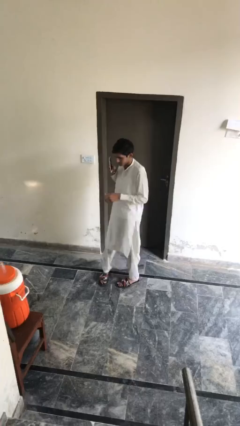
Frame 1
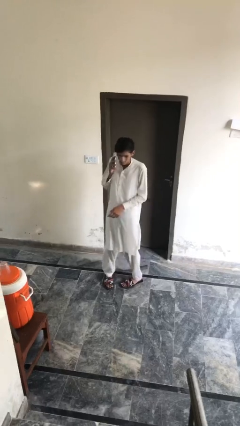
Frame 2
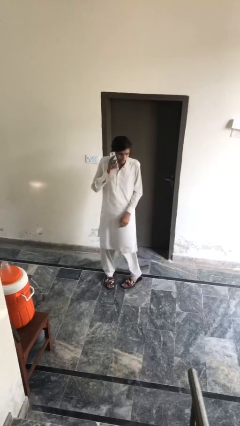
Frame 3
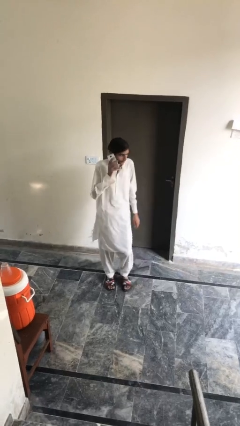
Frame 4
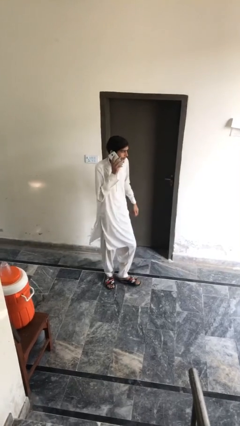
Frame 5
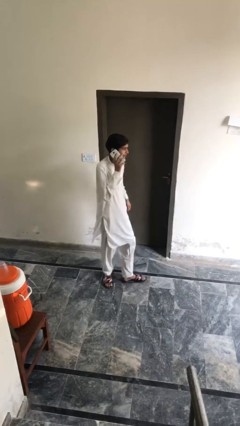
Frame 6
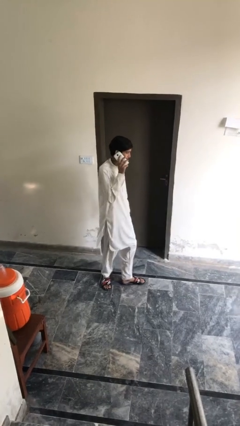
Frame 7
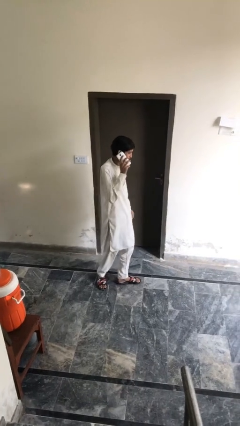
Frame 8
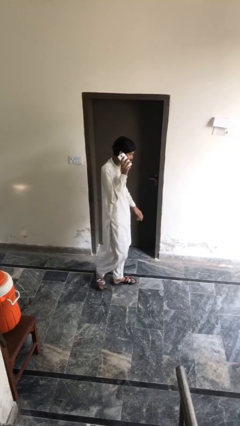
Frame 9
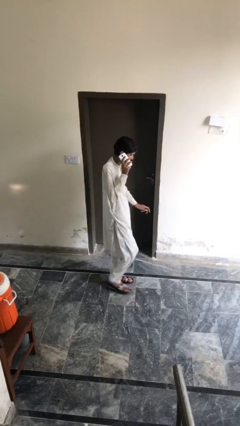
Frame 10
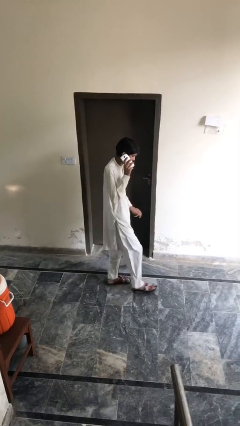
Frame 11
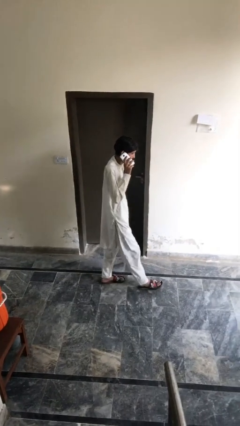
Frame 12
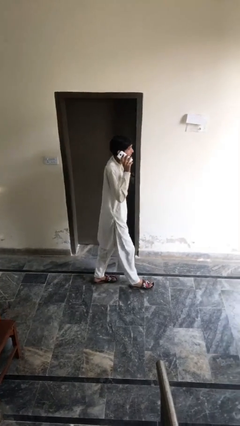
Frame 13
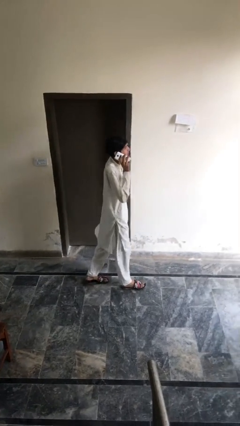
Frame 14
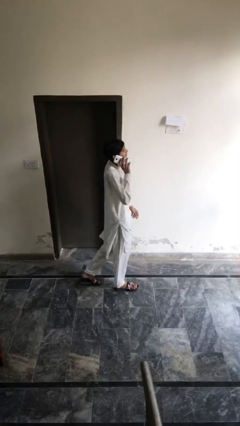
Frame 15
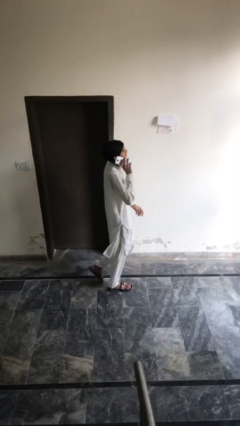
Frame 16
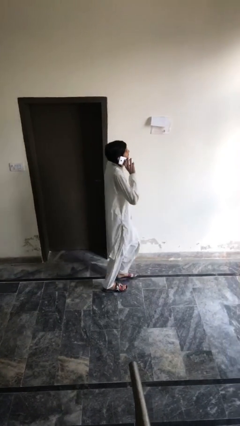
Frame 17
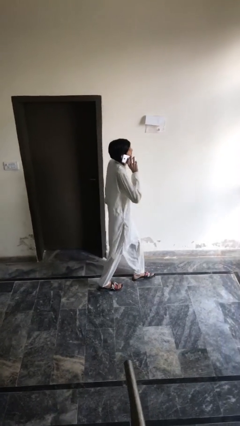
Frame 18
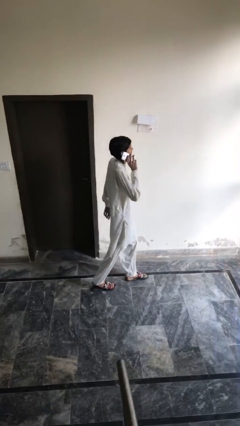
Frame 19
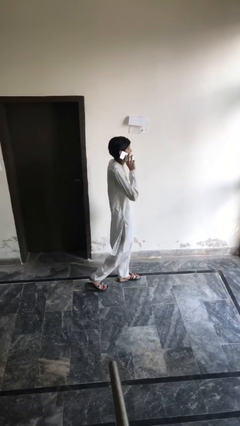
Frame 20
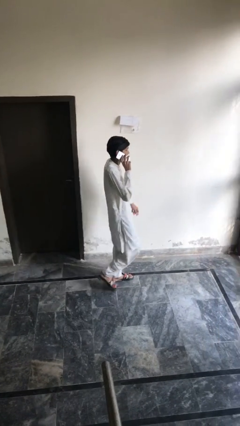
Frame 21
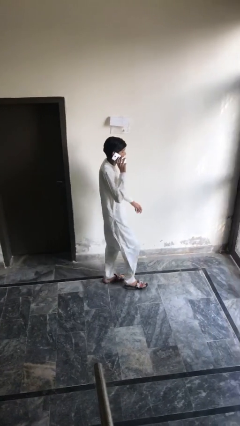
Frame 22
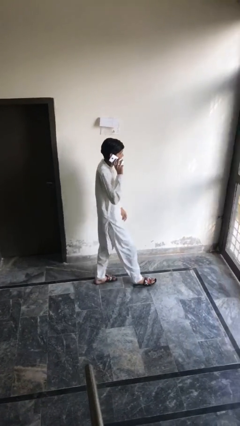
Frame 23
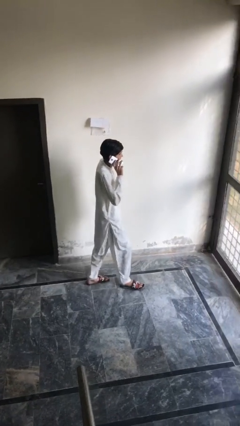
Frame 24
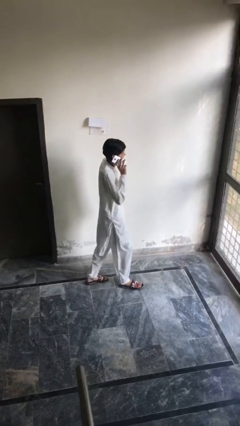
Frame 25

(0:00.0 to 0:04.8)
person talks on phone

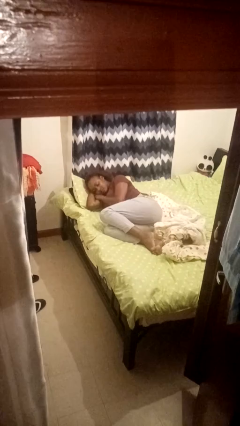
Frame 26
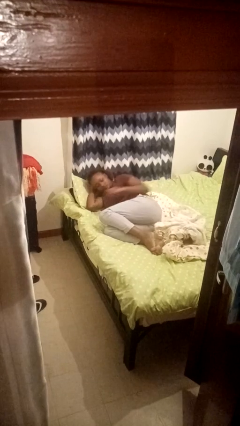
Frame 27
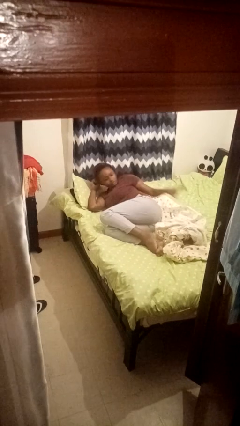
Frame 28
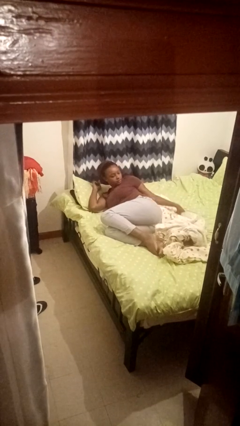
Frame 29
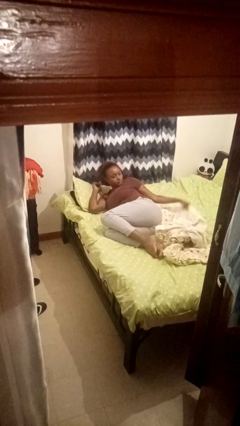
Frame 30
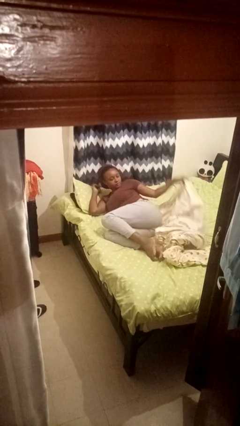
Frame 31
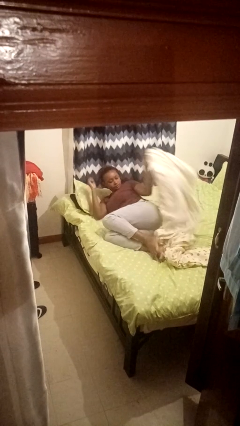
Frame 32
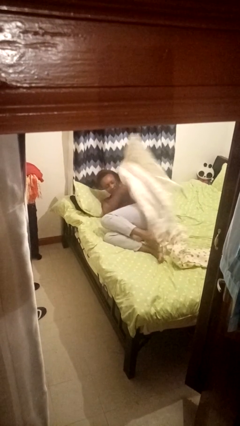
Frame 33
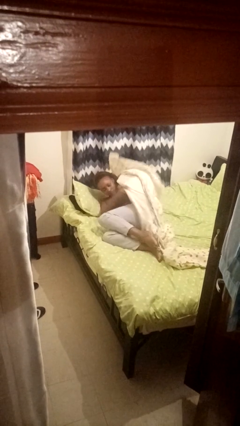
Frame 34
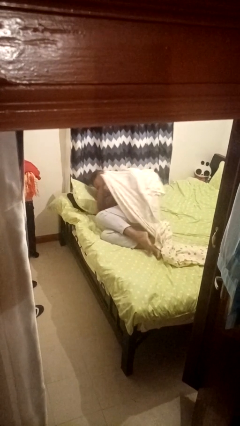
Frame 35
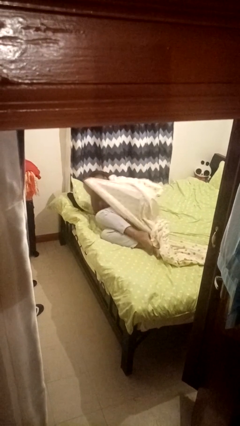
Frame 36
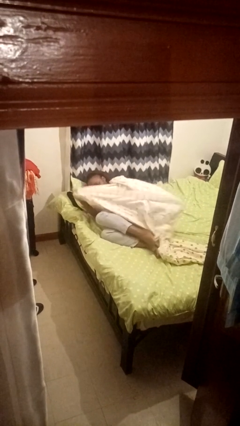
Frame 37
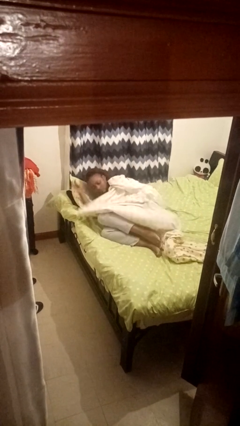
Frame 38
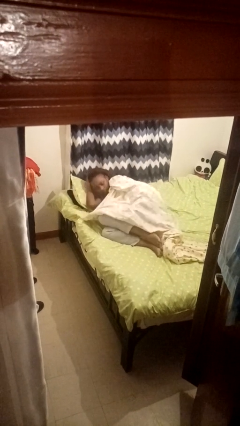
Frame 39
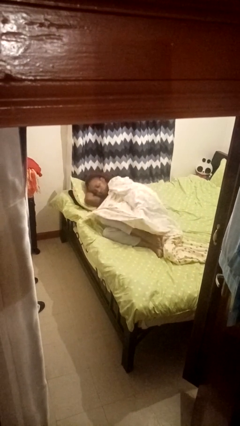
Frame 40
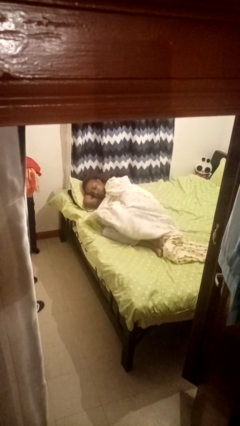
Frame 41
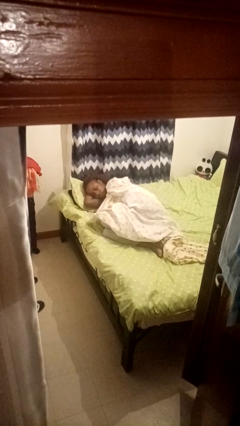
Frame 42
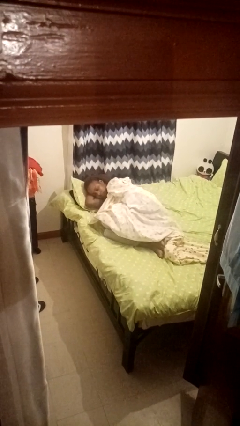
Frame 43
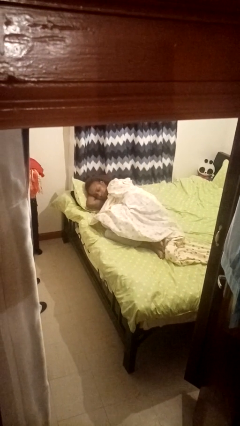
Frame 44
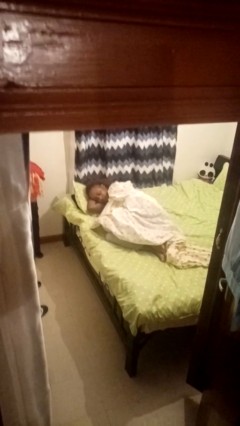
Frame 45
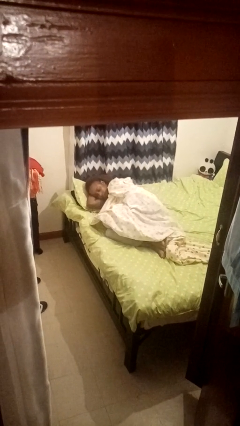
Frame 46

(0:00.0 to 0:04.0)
person covers with bedsheets

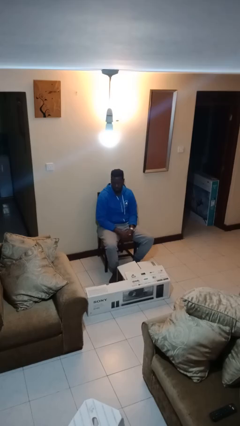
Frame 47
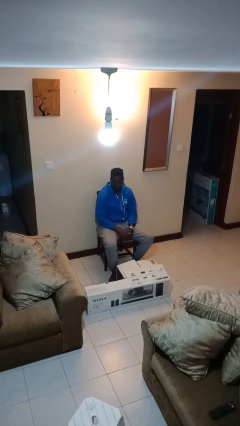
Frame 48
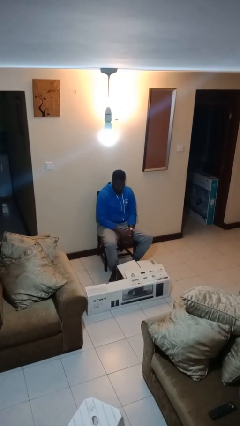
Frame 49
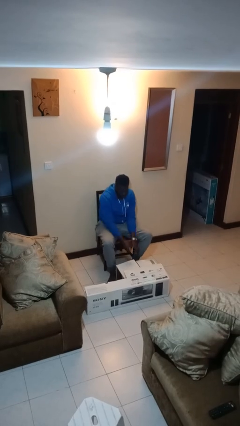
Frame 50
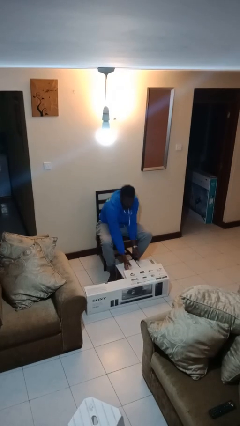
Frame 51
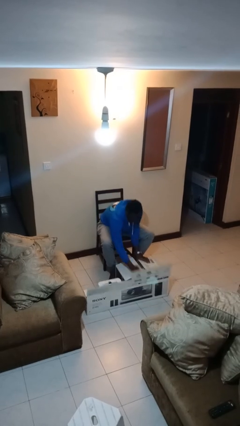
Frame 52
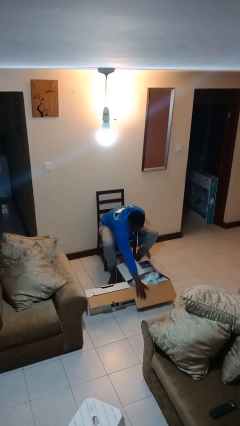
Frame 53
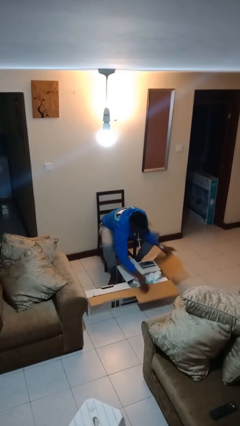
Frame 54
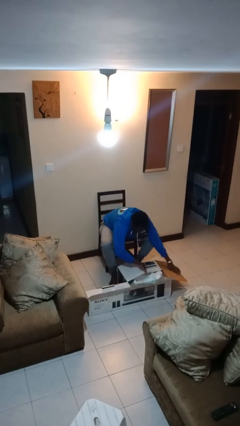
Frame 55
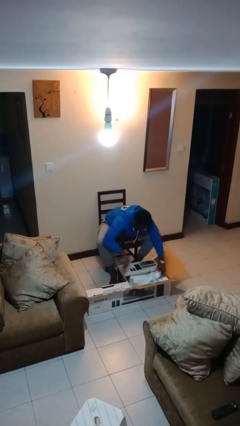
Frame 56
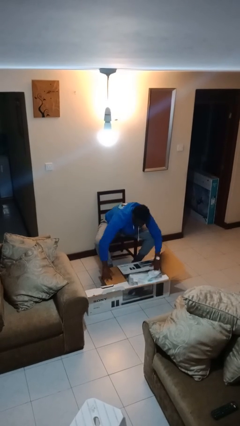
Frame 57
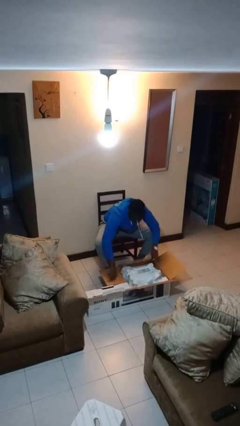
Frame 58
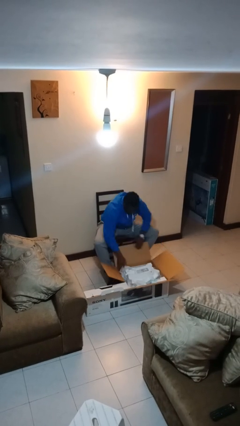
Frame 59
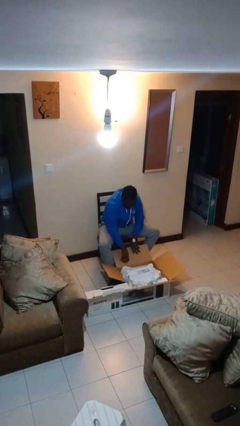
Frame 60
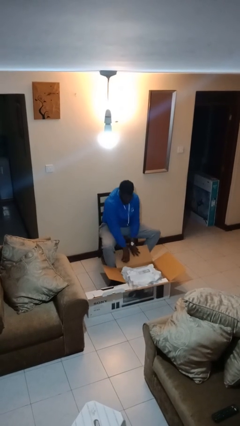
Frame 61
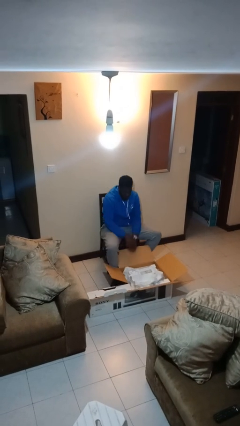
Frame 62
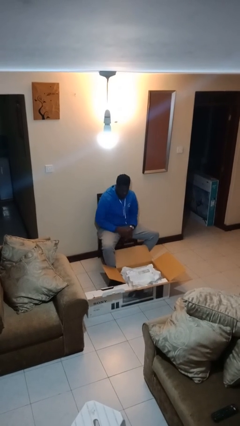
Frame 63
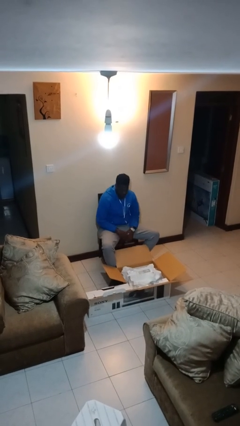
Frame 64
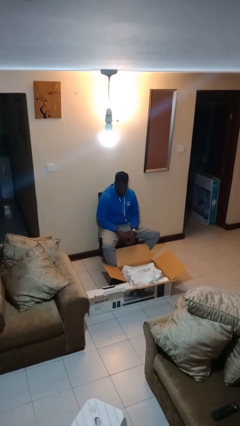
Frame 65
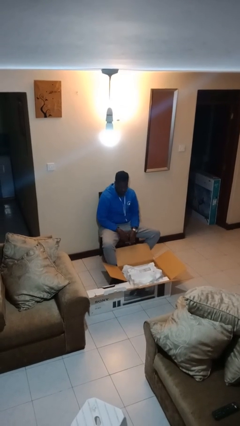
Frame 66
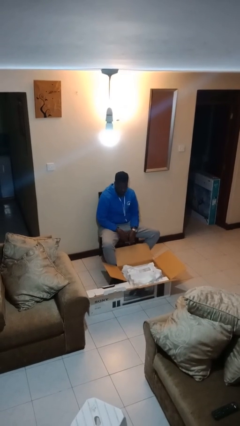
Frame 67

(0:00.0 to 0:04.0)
person opens box

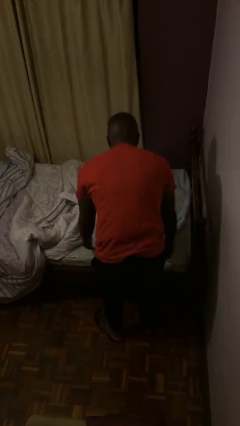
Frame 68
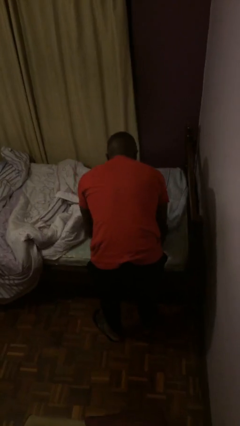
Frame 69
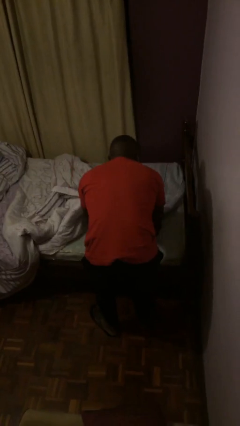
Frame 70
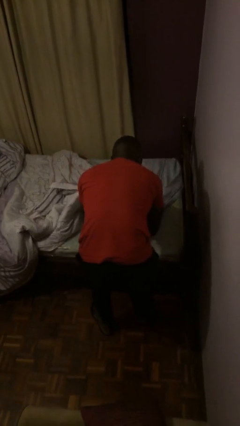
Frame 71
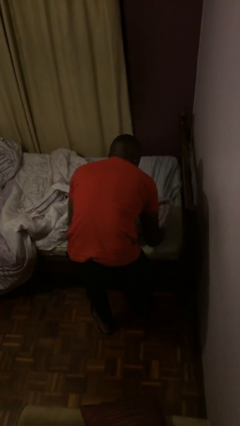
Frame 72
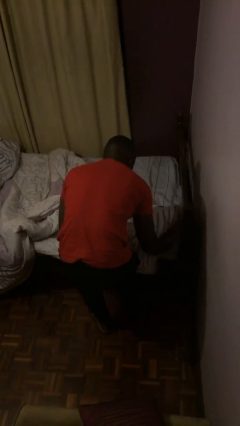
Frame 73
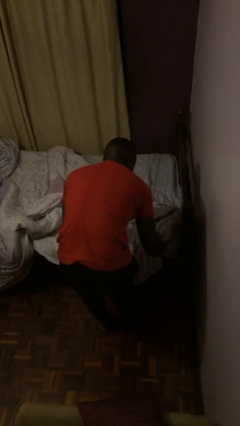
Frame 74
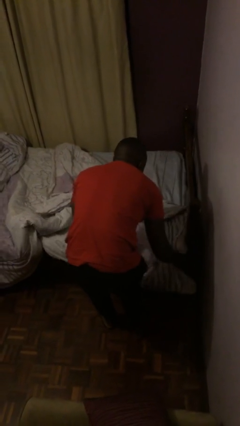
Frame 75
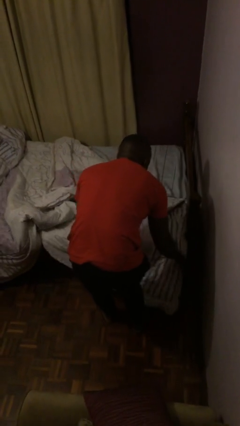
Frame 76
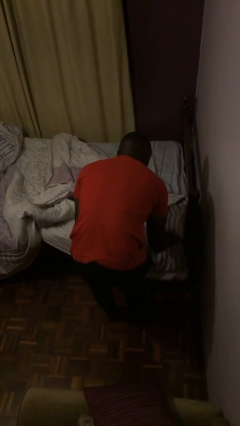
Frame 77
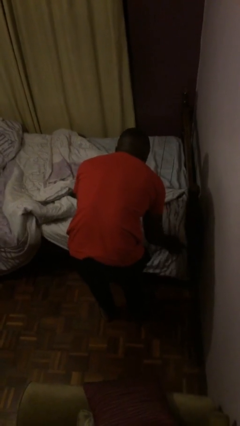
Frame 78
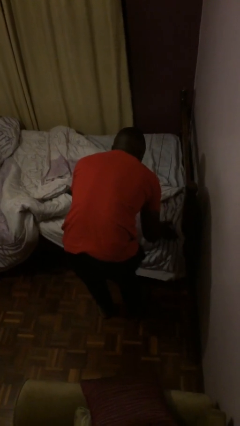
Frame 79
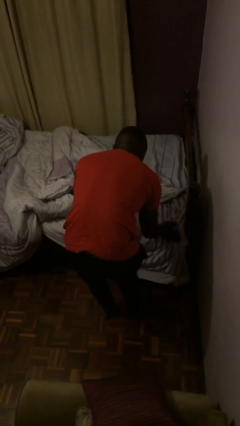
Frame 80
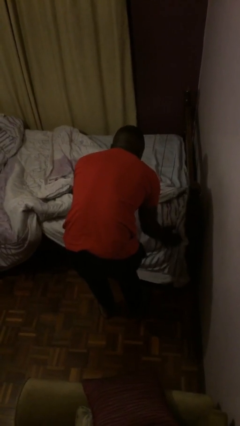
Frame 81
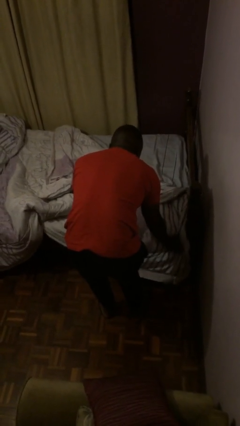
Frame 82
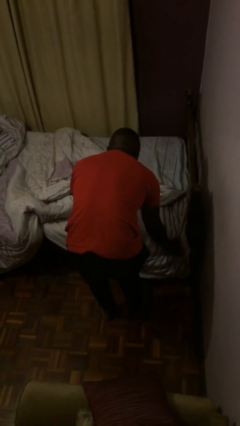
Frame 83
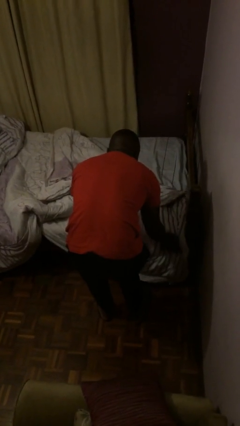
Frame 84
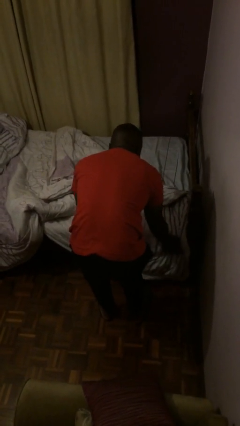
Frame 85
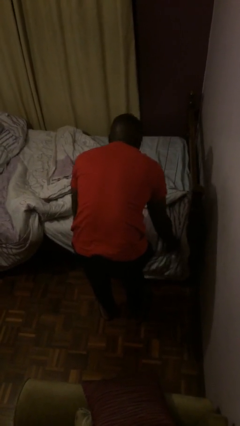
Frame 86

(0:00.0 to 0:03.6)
person makes bed

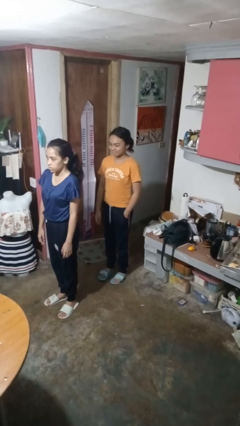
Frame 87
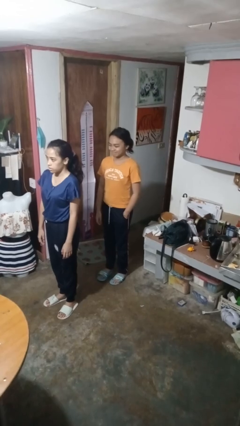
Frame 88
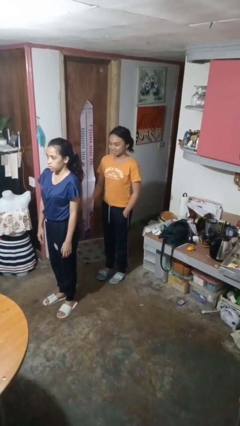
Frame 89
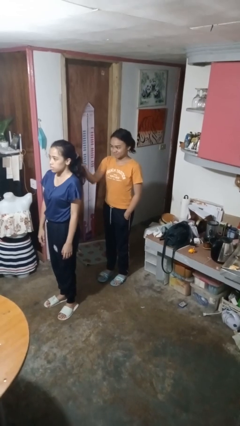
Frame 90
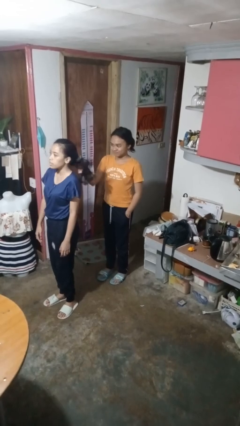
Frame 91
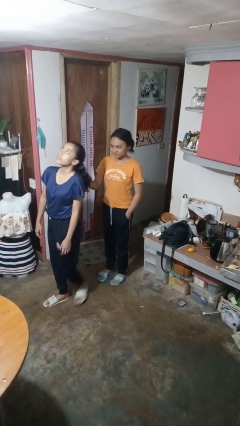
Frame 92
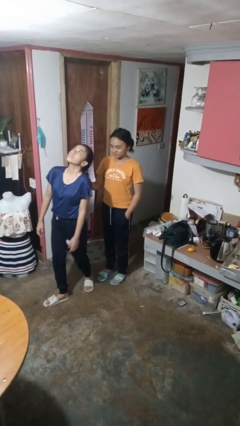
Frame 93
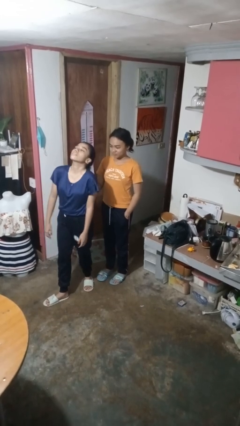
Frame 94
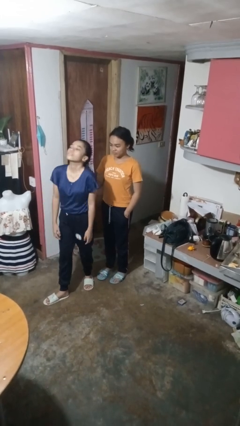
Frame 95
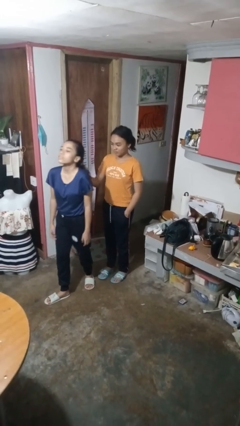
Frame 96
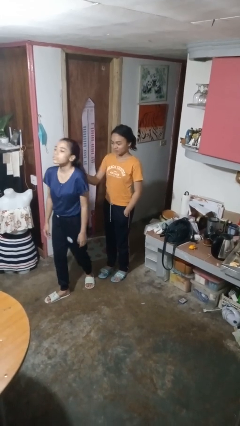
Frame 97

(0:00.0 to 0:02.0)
person grabs person by hair
